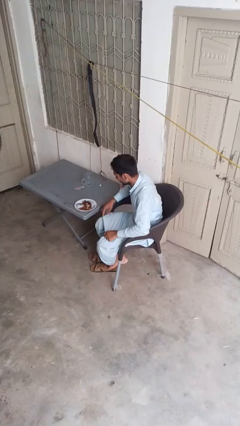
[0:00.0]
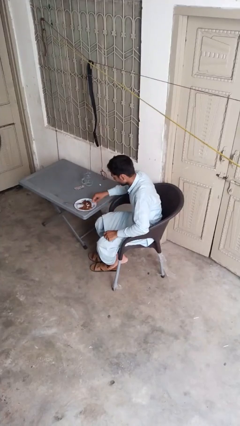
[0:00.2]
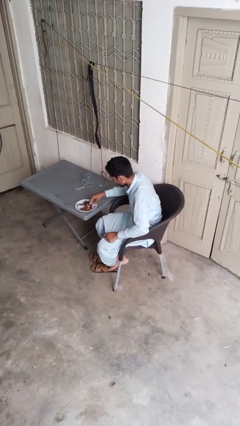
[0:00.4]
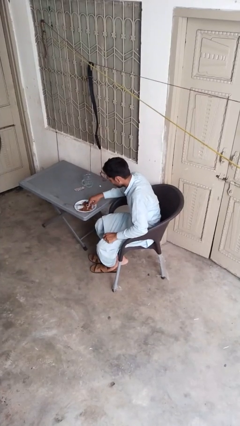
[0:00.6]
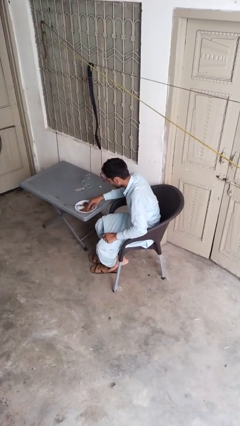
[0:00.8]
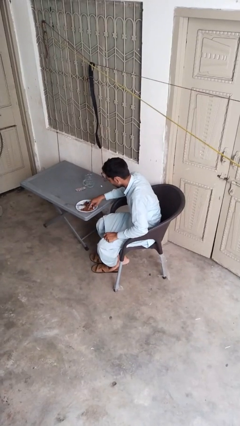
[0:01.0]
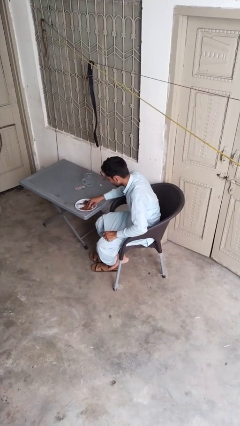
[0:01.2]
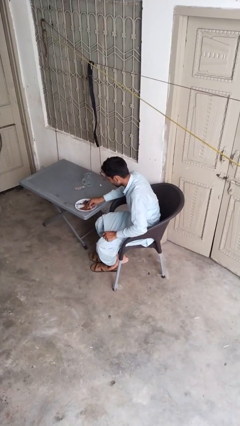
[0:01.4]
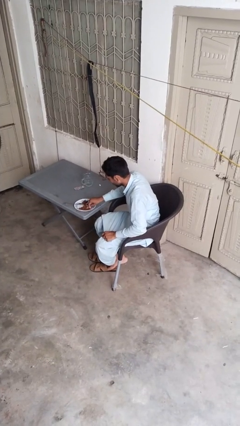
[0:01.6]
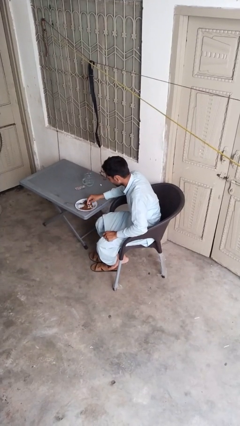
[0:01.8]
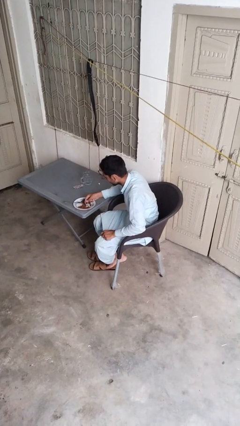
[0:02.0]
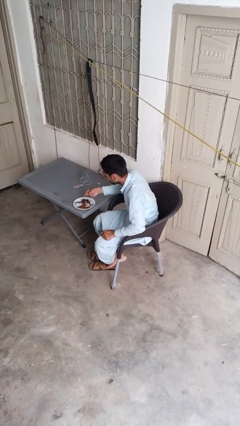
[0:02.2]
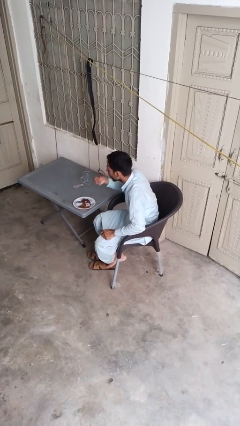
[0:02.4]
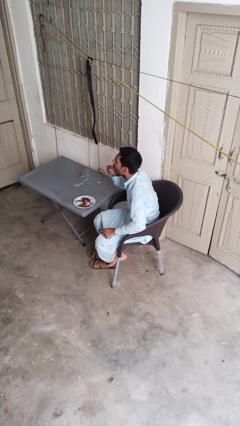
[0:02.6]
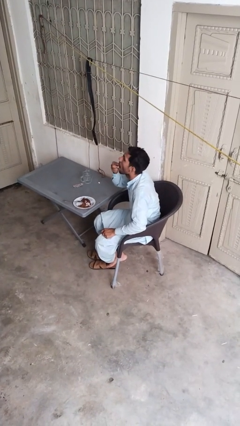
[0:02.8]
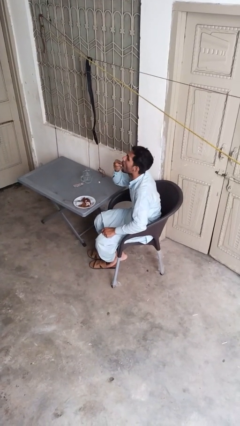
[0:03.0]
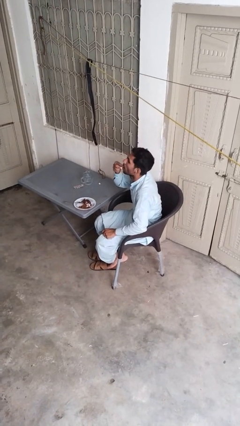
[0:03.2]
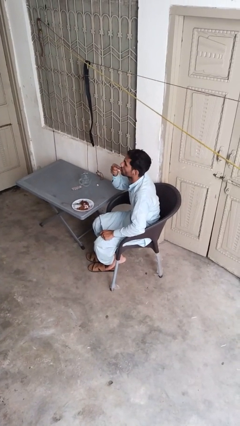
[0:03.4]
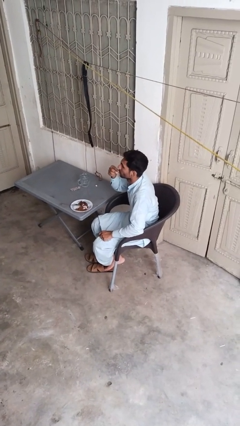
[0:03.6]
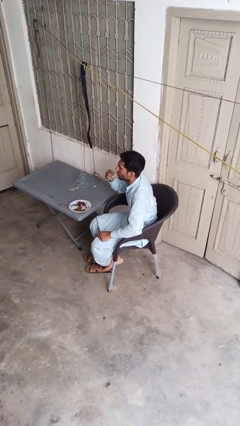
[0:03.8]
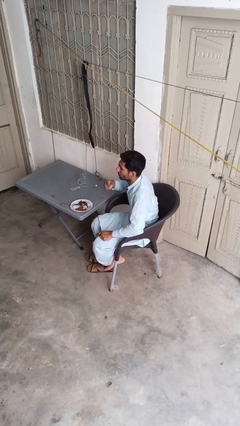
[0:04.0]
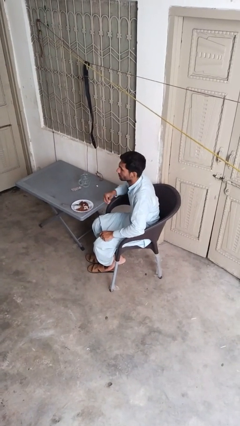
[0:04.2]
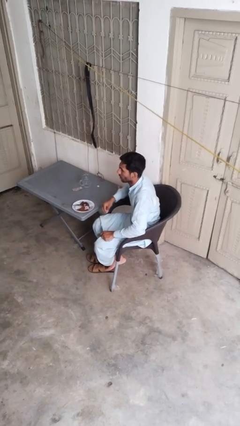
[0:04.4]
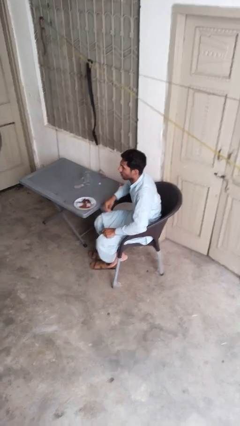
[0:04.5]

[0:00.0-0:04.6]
person eats with hands

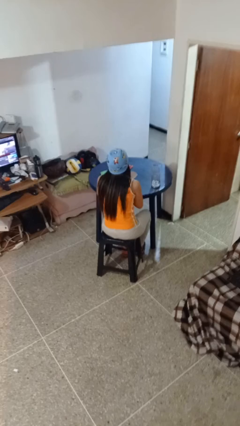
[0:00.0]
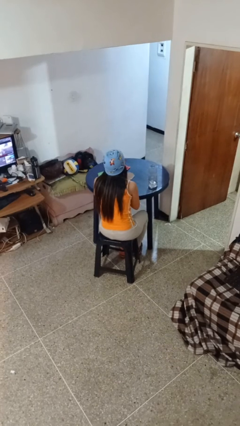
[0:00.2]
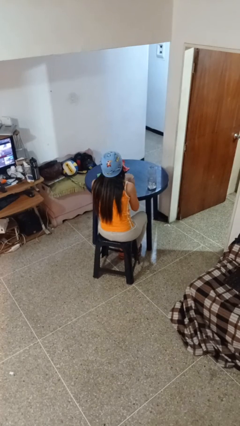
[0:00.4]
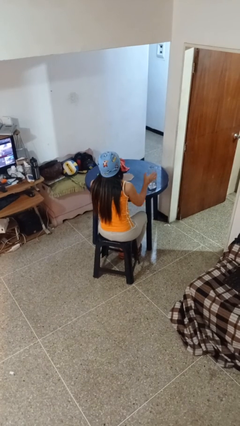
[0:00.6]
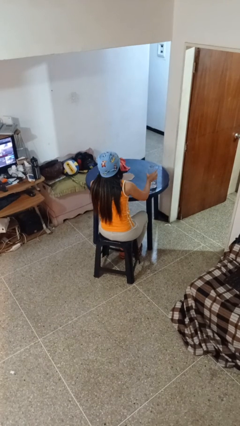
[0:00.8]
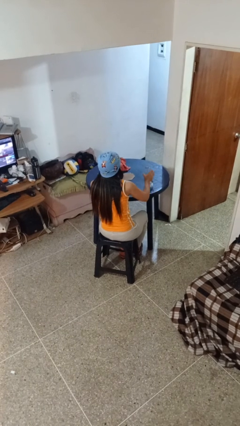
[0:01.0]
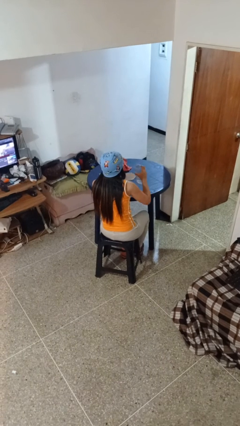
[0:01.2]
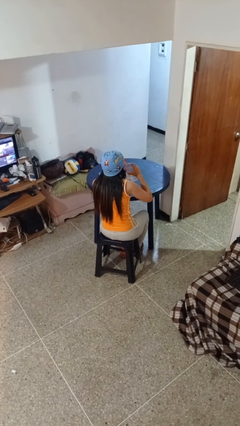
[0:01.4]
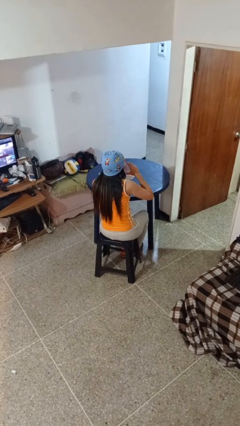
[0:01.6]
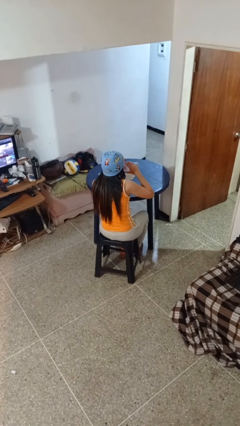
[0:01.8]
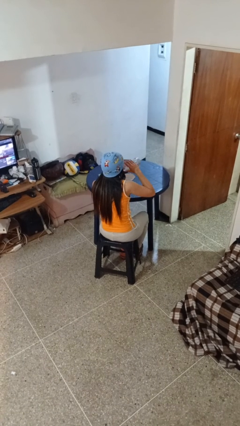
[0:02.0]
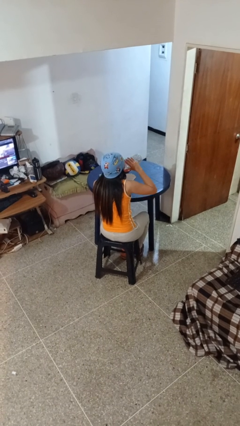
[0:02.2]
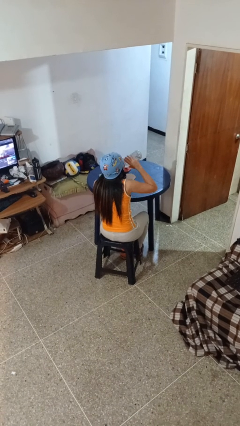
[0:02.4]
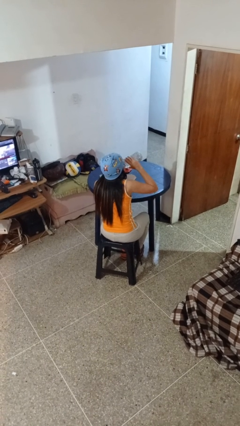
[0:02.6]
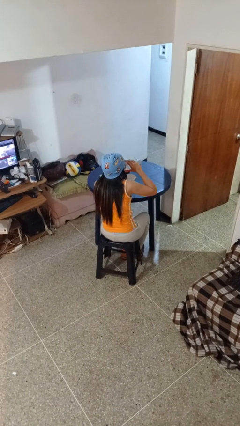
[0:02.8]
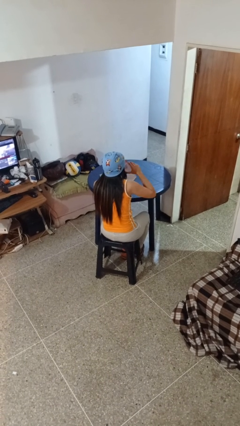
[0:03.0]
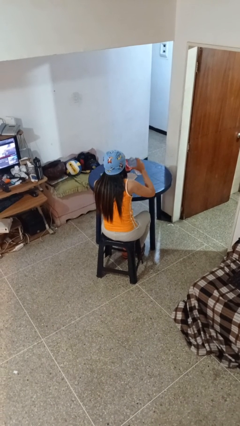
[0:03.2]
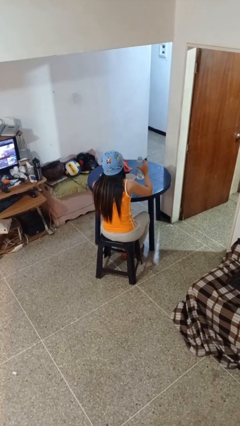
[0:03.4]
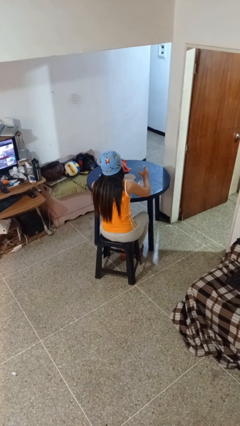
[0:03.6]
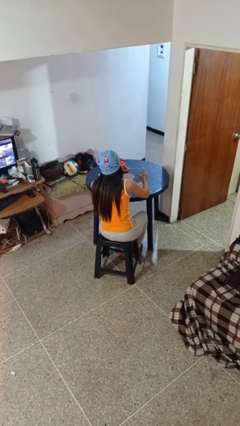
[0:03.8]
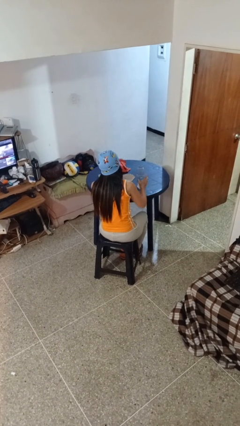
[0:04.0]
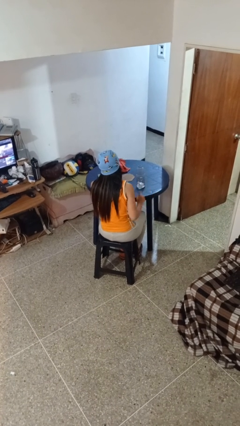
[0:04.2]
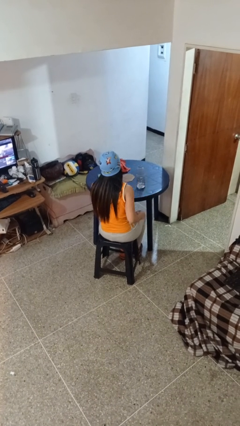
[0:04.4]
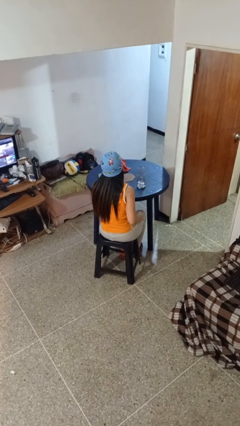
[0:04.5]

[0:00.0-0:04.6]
person drinks from bottle

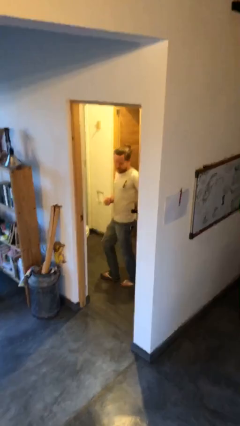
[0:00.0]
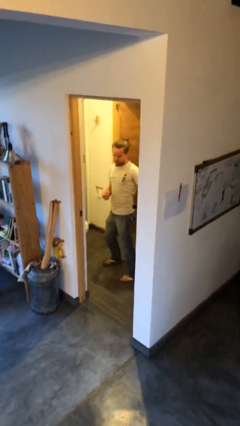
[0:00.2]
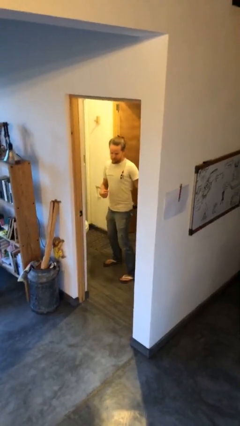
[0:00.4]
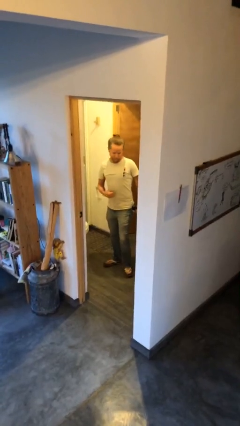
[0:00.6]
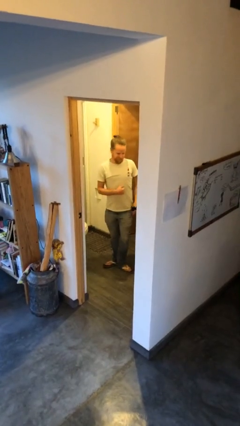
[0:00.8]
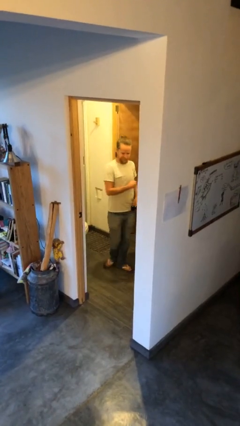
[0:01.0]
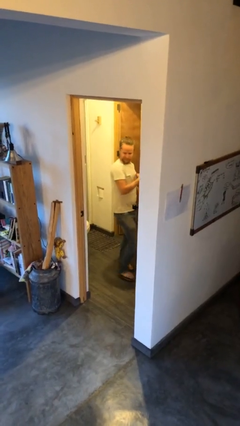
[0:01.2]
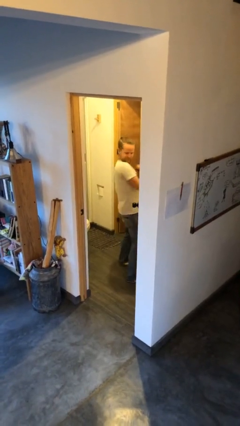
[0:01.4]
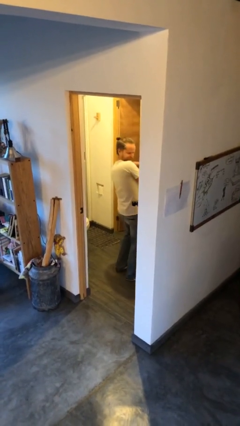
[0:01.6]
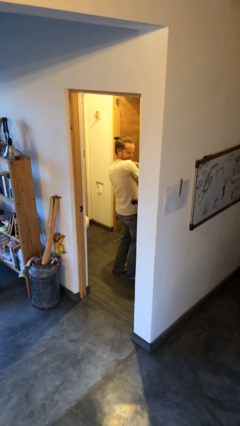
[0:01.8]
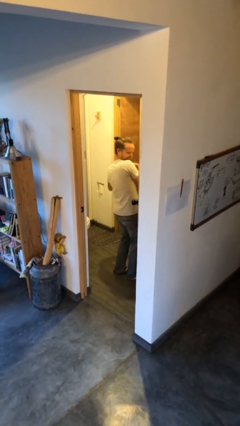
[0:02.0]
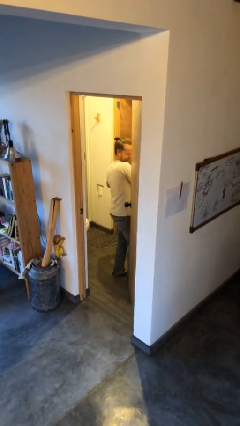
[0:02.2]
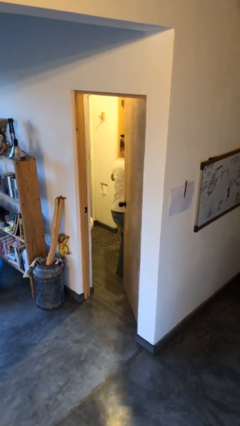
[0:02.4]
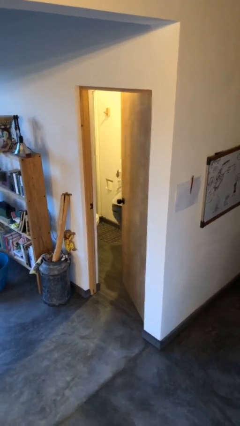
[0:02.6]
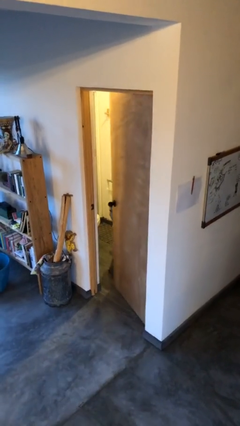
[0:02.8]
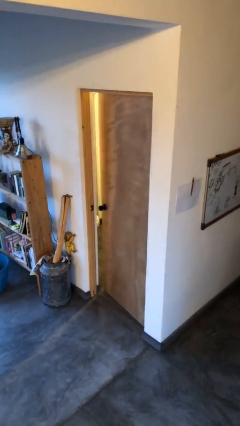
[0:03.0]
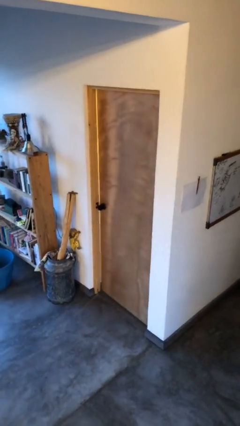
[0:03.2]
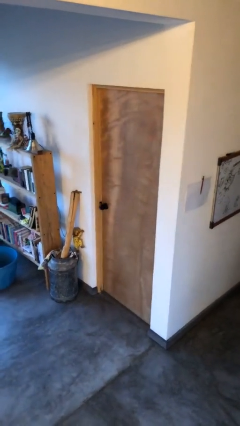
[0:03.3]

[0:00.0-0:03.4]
person closes door with hip

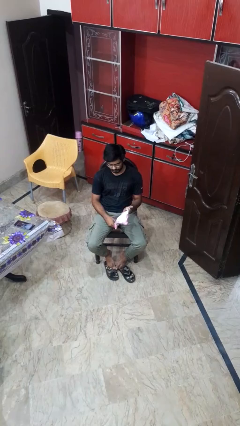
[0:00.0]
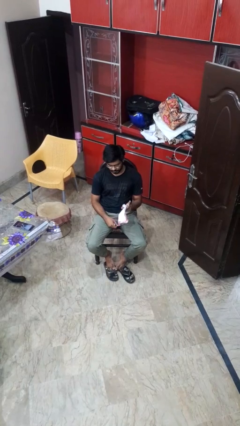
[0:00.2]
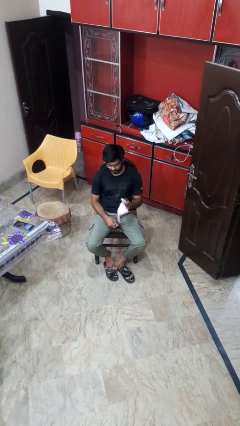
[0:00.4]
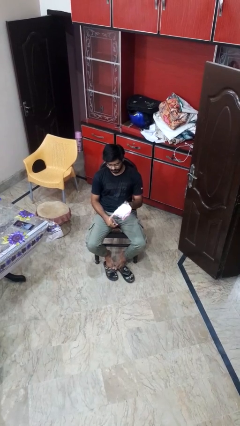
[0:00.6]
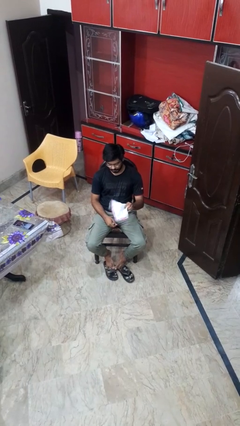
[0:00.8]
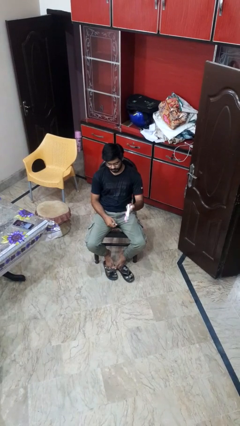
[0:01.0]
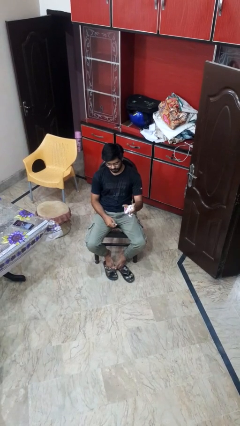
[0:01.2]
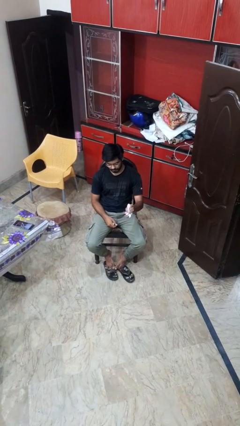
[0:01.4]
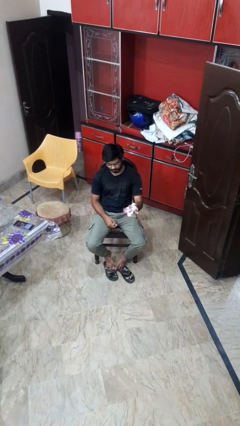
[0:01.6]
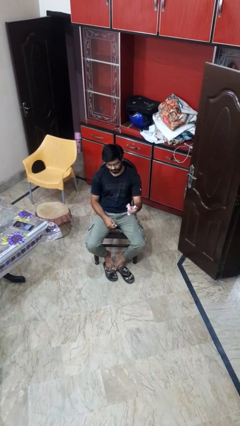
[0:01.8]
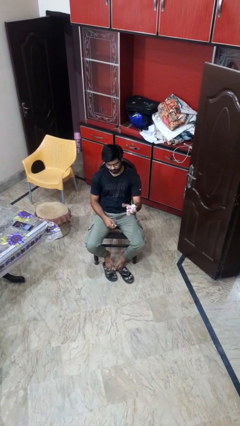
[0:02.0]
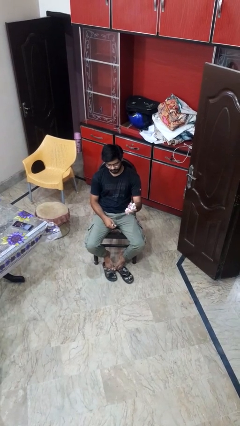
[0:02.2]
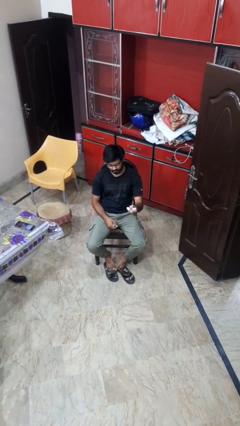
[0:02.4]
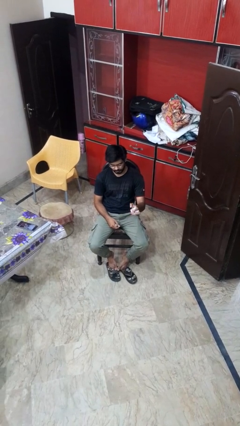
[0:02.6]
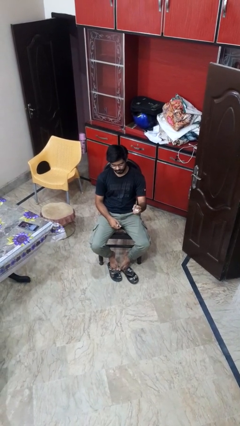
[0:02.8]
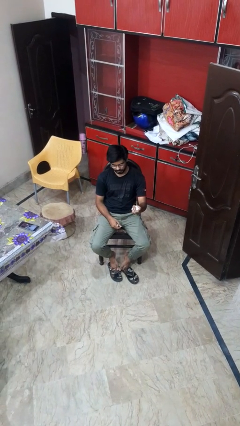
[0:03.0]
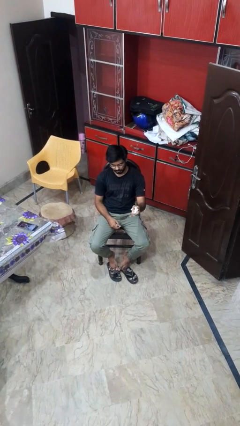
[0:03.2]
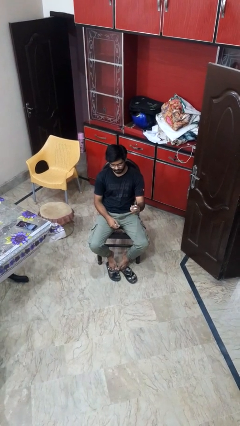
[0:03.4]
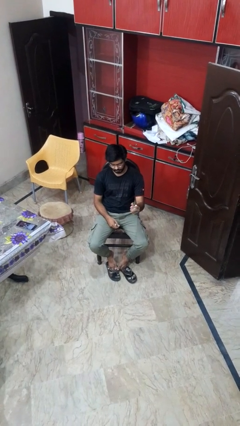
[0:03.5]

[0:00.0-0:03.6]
person crumples paper

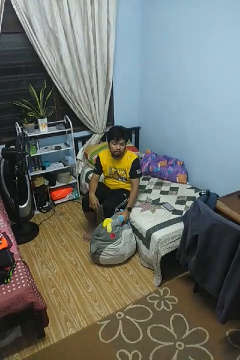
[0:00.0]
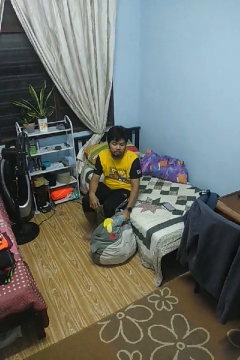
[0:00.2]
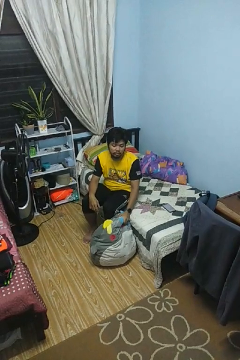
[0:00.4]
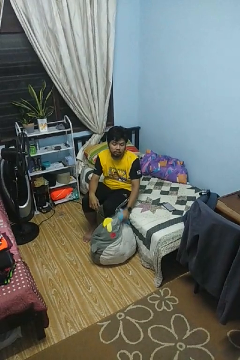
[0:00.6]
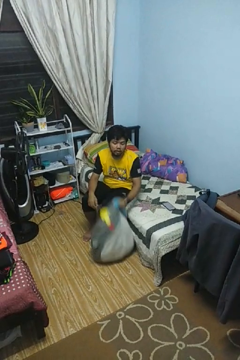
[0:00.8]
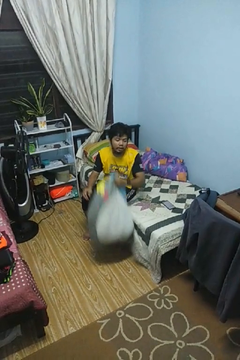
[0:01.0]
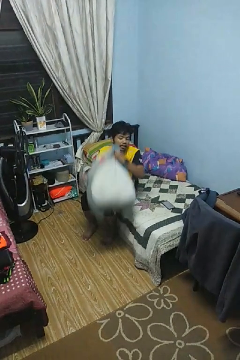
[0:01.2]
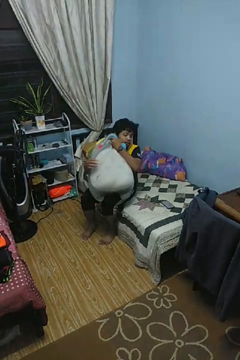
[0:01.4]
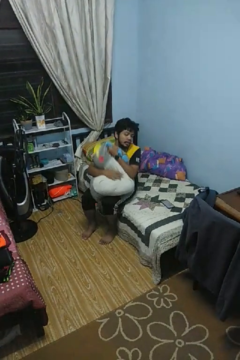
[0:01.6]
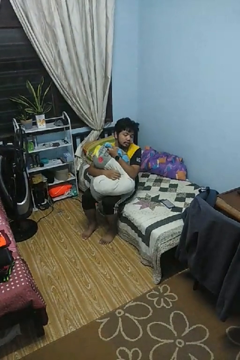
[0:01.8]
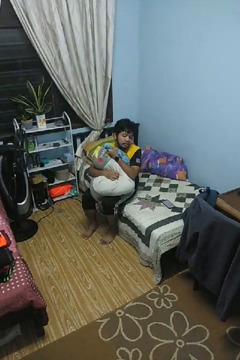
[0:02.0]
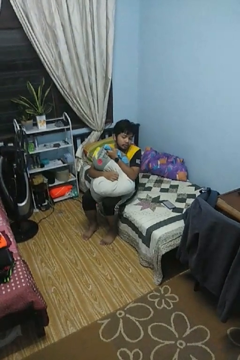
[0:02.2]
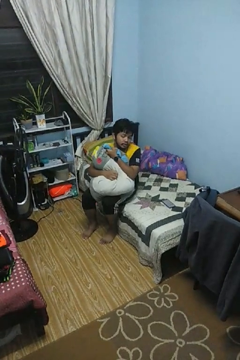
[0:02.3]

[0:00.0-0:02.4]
person hugs stuffed animal
